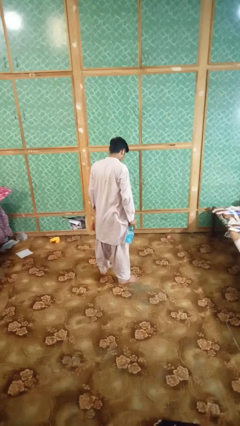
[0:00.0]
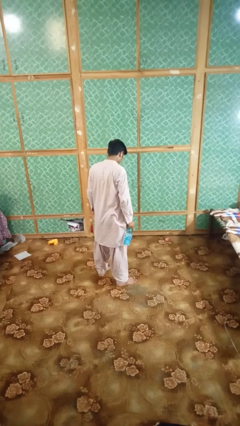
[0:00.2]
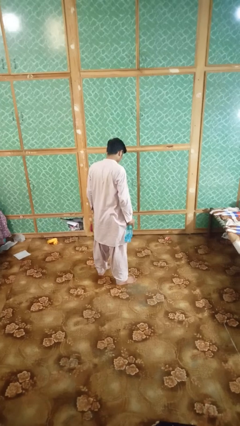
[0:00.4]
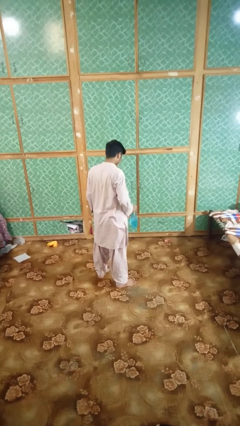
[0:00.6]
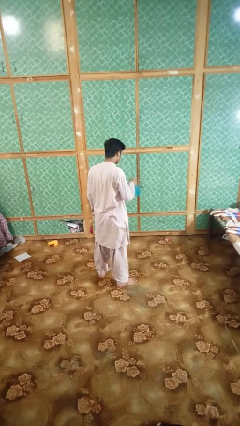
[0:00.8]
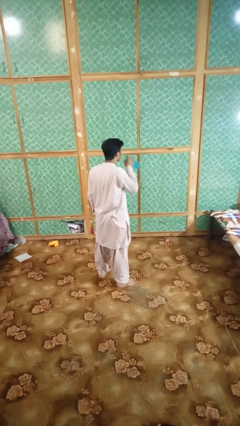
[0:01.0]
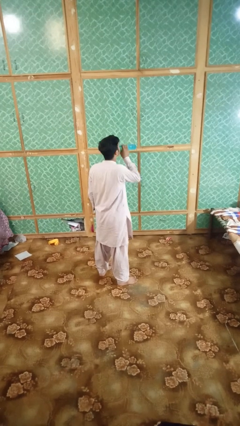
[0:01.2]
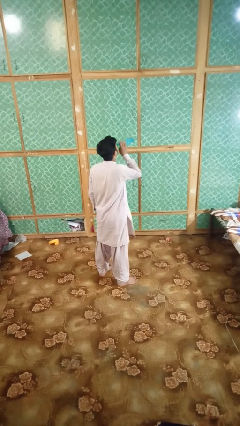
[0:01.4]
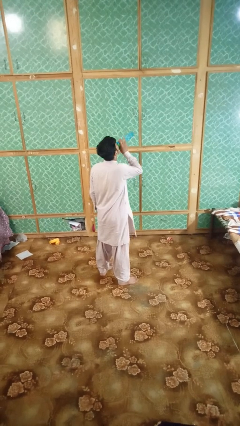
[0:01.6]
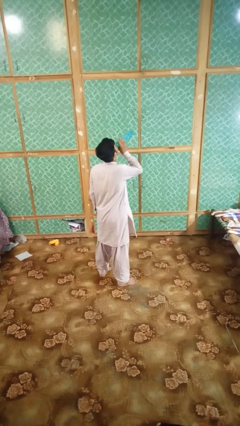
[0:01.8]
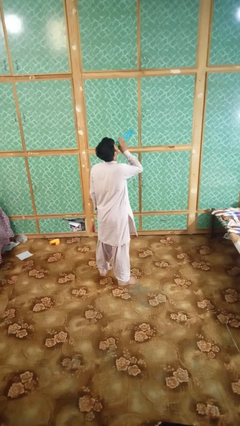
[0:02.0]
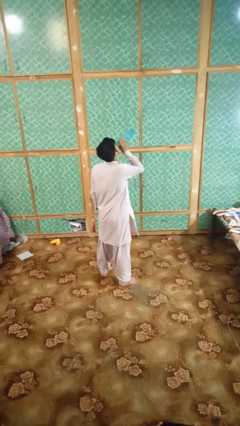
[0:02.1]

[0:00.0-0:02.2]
person drinks from bottle

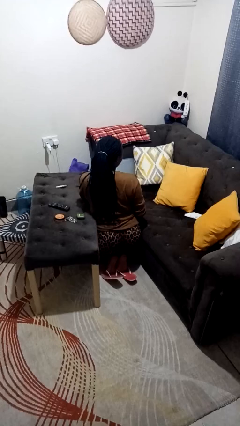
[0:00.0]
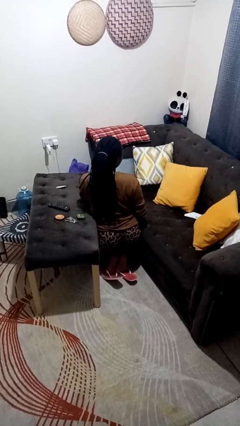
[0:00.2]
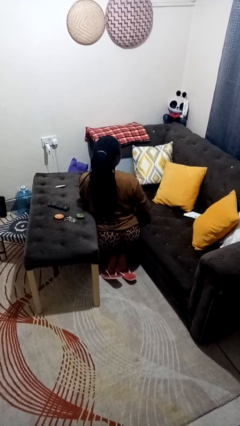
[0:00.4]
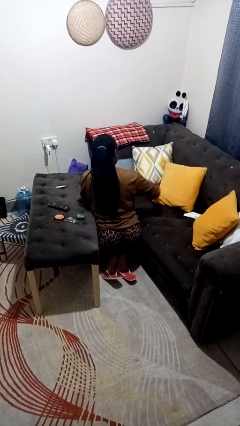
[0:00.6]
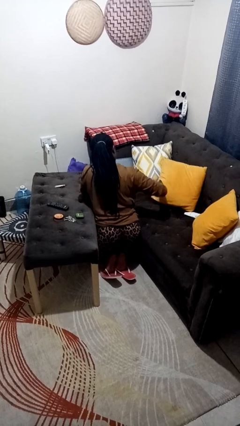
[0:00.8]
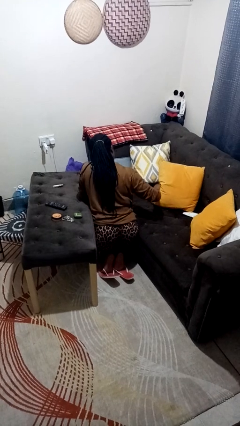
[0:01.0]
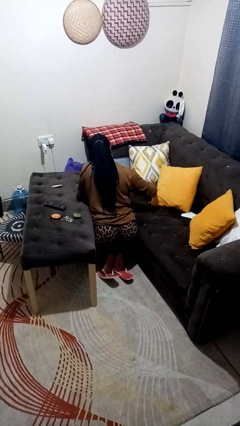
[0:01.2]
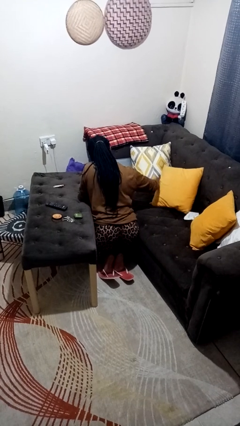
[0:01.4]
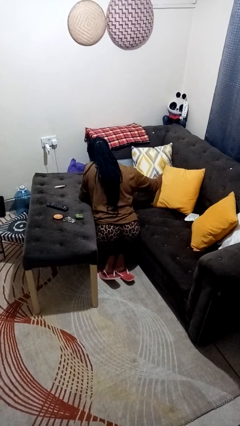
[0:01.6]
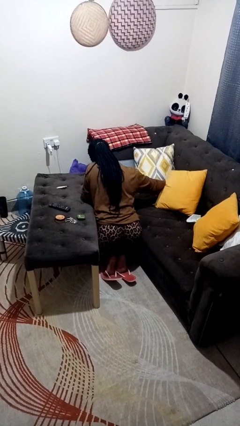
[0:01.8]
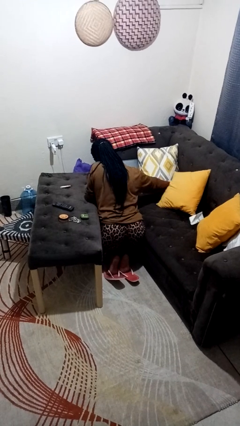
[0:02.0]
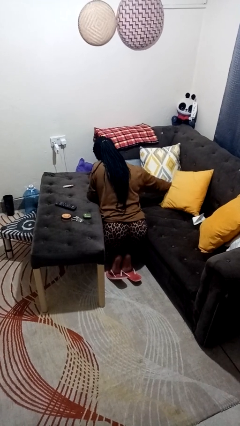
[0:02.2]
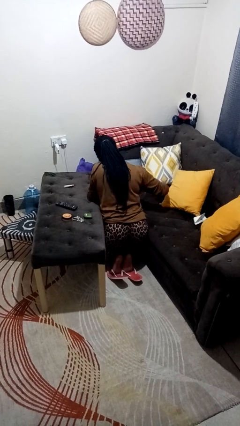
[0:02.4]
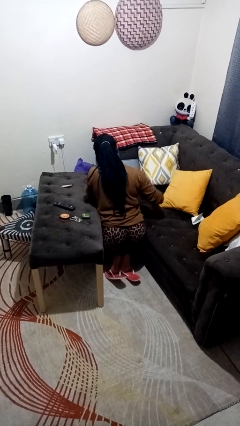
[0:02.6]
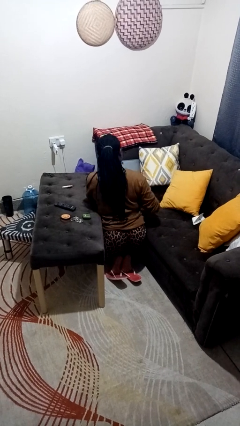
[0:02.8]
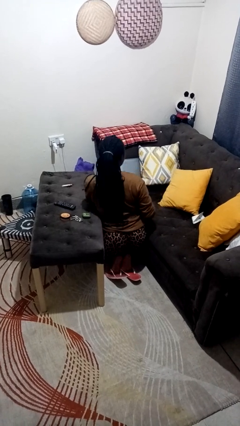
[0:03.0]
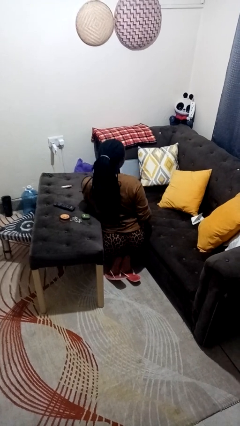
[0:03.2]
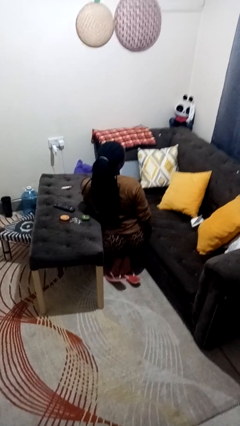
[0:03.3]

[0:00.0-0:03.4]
person searches in couch

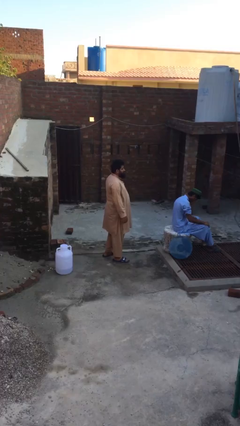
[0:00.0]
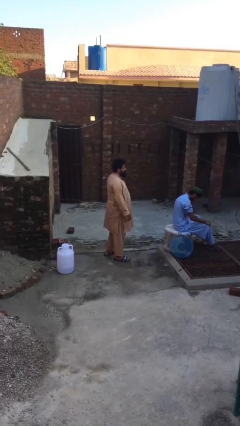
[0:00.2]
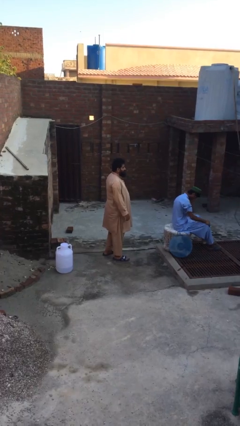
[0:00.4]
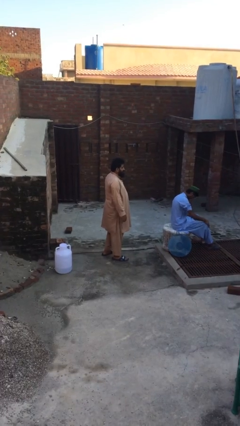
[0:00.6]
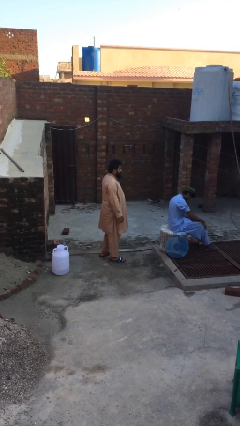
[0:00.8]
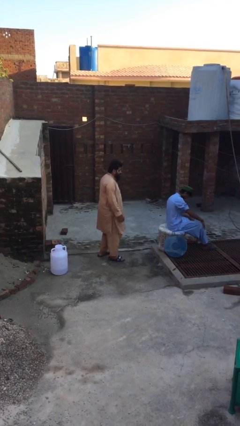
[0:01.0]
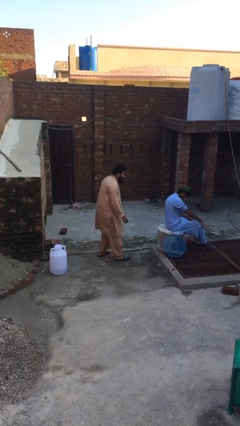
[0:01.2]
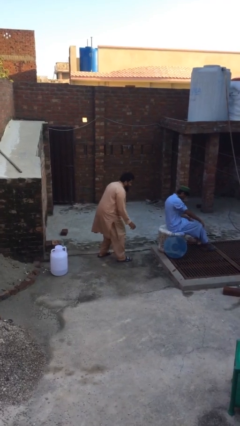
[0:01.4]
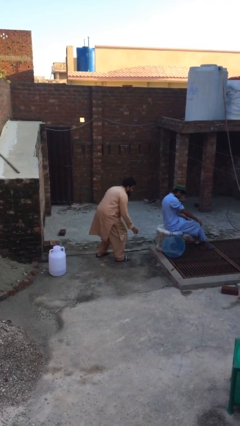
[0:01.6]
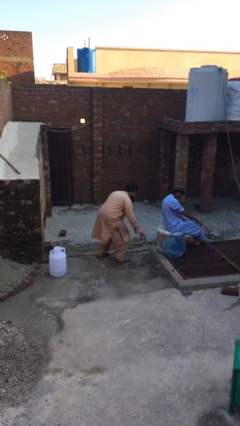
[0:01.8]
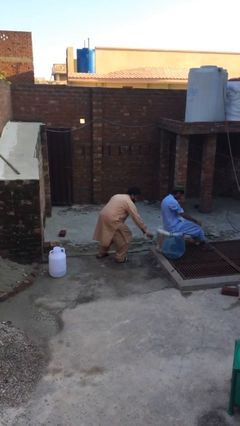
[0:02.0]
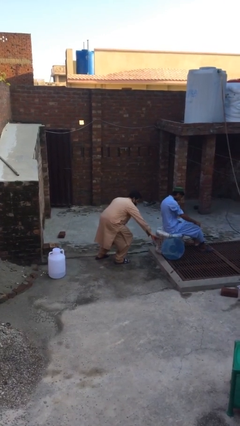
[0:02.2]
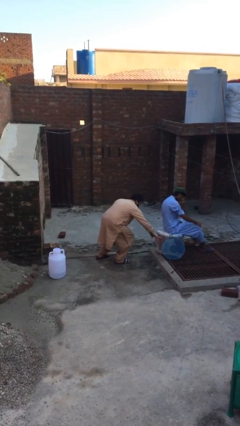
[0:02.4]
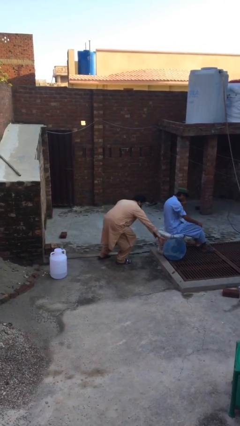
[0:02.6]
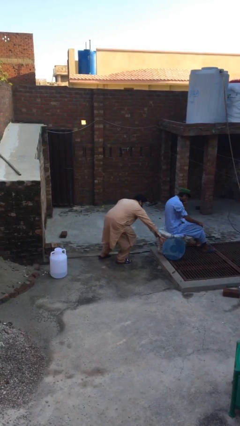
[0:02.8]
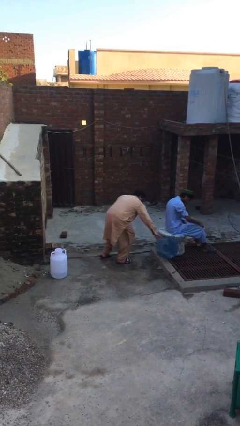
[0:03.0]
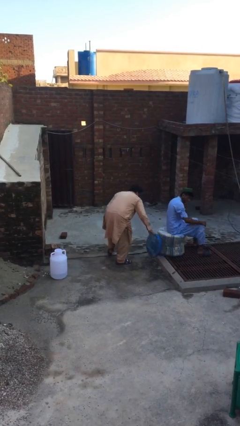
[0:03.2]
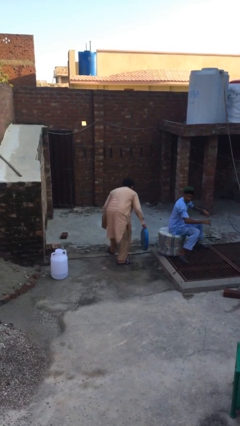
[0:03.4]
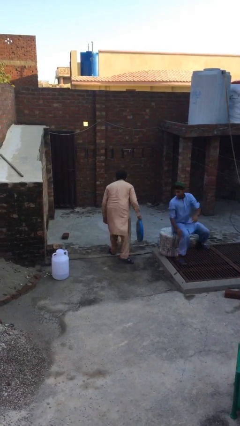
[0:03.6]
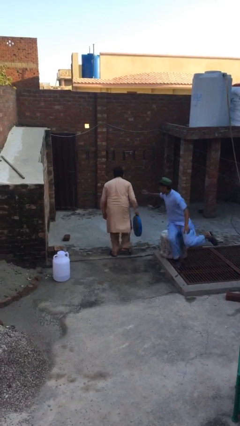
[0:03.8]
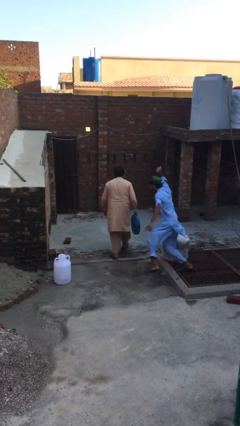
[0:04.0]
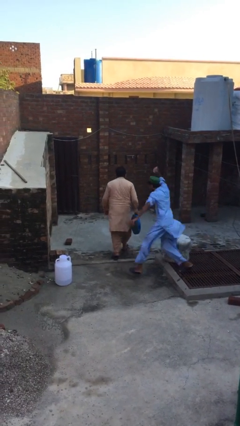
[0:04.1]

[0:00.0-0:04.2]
person steals object from person

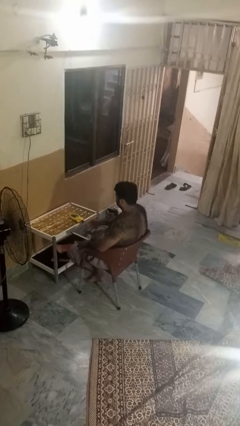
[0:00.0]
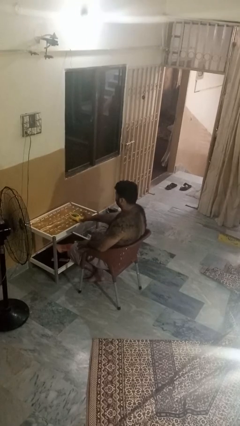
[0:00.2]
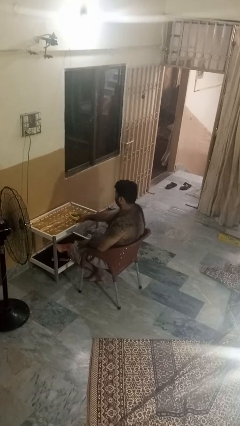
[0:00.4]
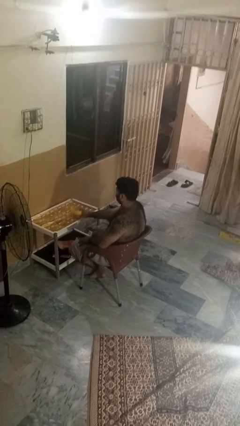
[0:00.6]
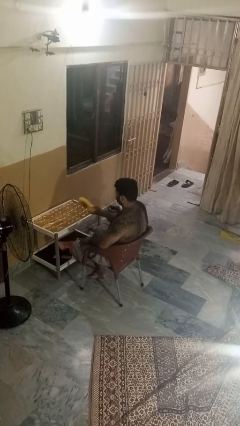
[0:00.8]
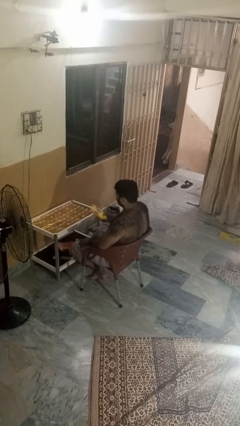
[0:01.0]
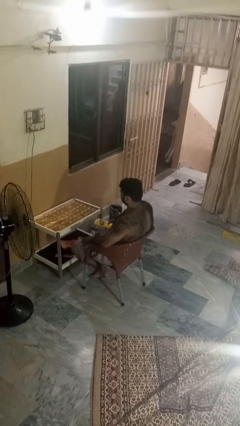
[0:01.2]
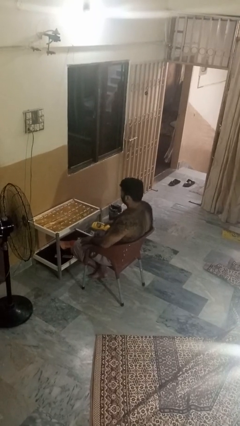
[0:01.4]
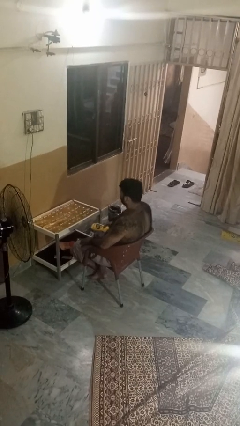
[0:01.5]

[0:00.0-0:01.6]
person picks up object from table

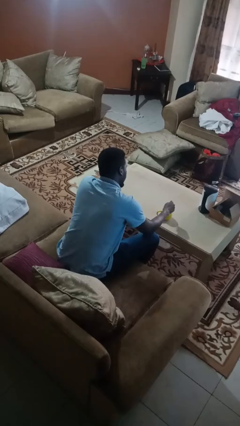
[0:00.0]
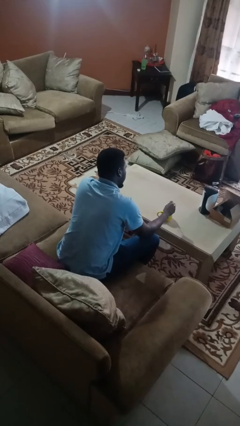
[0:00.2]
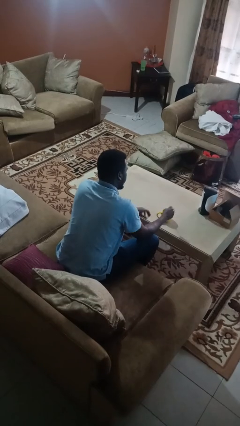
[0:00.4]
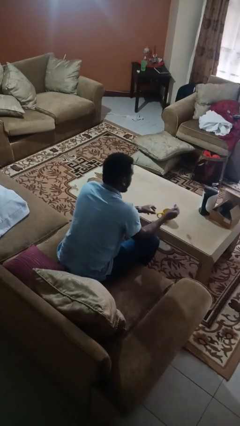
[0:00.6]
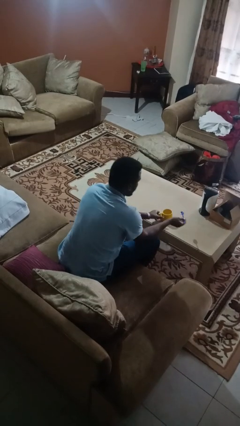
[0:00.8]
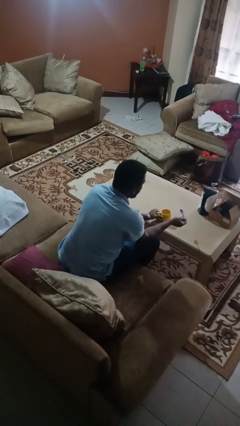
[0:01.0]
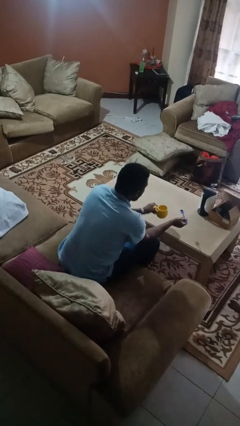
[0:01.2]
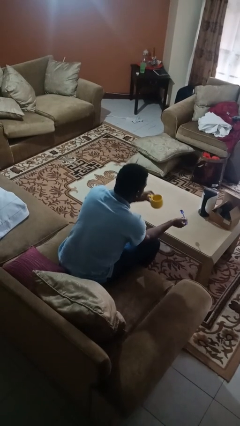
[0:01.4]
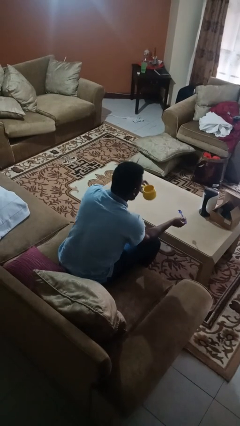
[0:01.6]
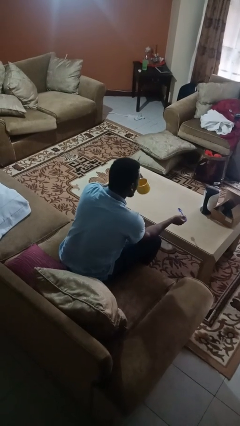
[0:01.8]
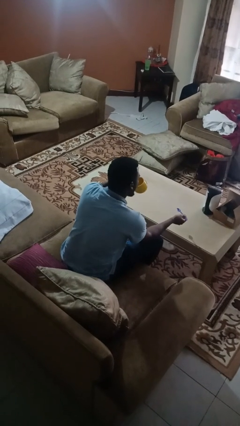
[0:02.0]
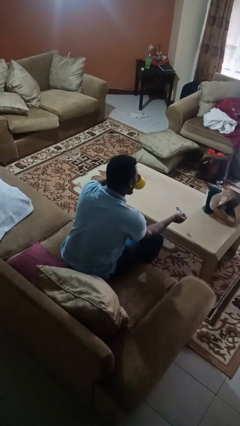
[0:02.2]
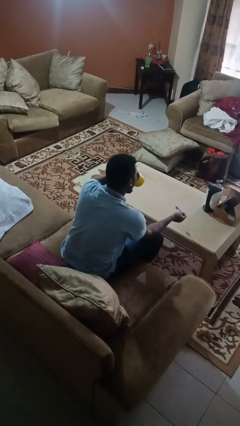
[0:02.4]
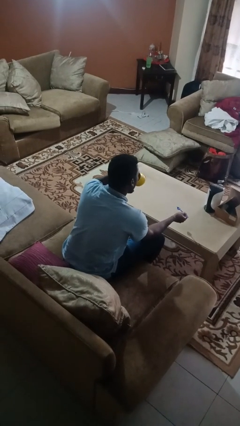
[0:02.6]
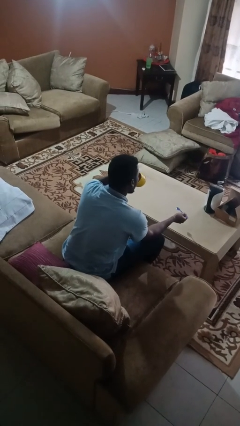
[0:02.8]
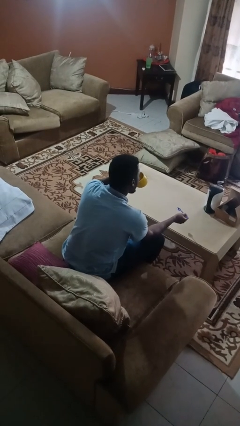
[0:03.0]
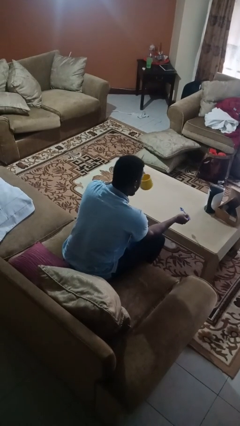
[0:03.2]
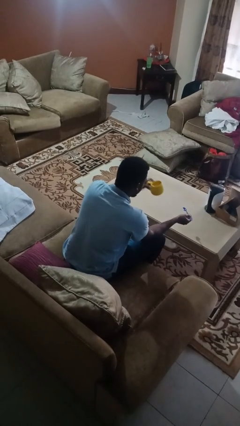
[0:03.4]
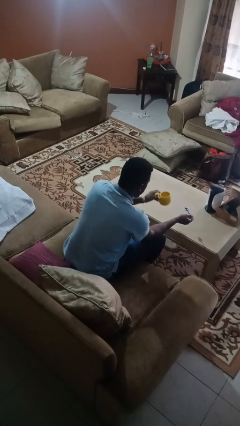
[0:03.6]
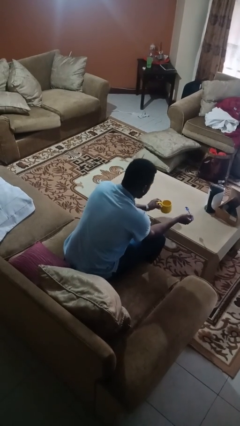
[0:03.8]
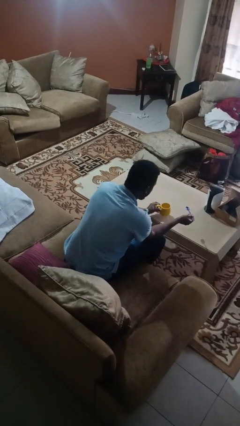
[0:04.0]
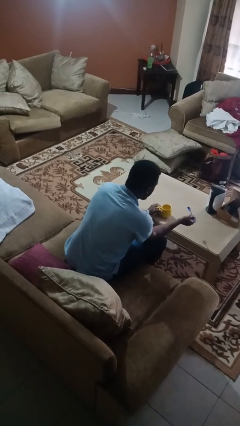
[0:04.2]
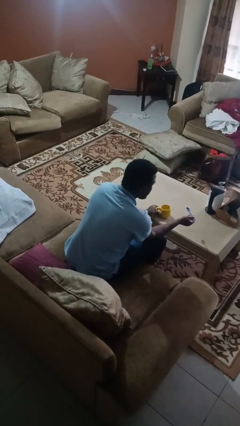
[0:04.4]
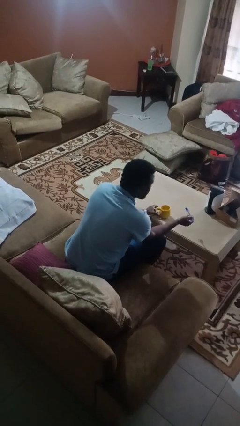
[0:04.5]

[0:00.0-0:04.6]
person drinks from mug

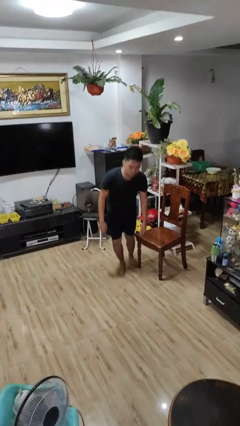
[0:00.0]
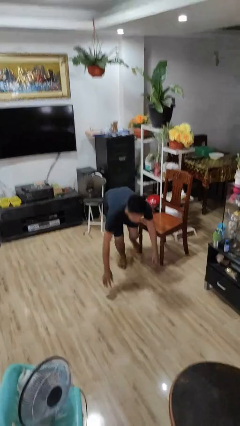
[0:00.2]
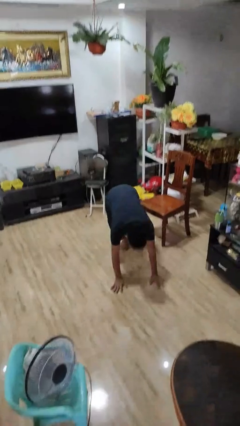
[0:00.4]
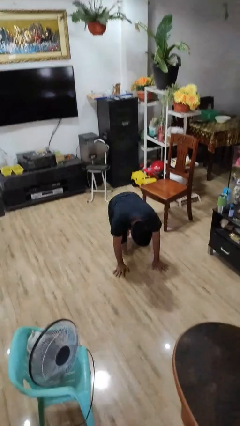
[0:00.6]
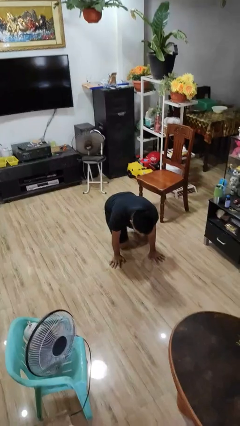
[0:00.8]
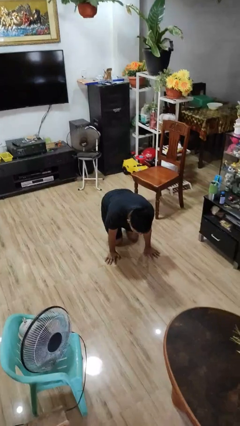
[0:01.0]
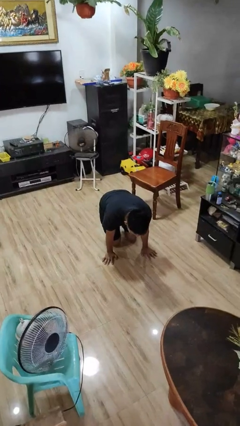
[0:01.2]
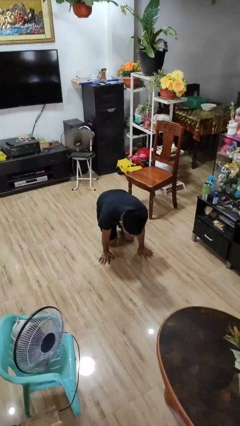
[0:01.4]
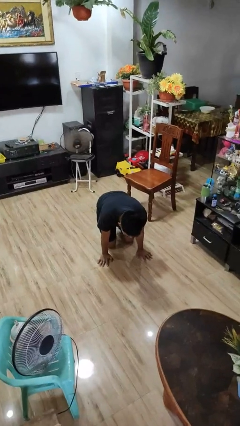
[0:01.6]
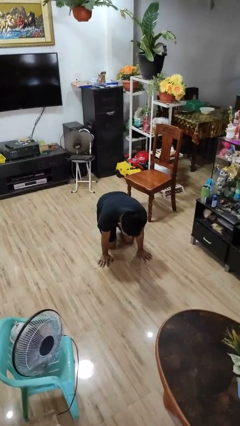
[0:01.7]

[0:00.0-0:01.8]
person trips on object on floor
